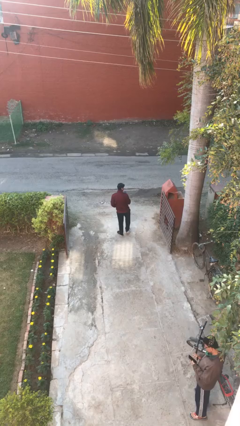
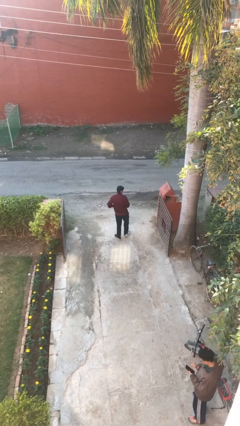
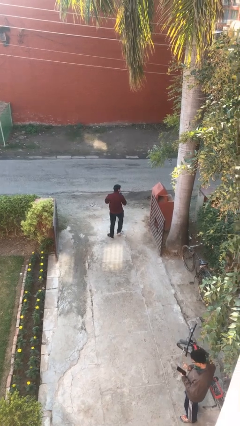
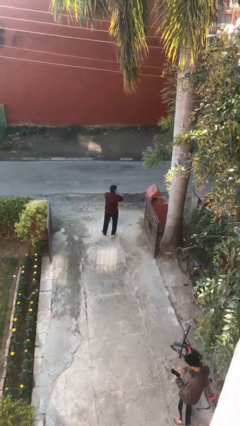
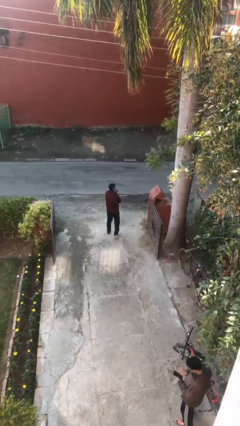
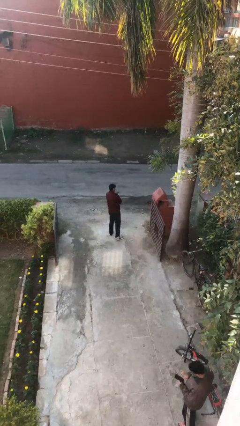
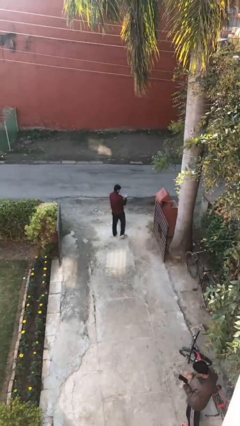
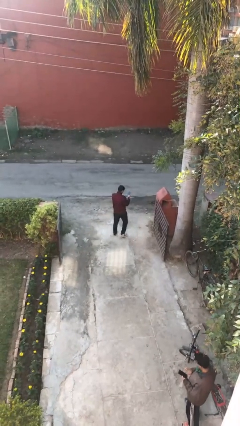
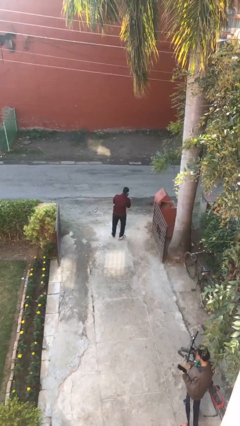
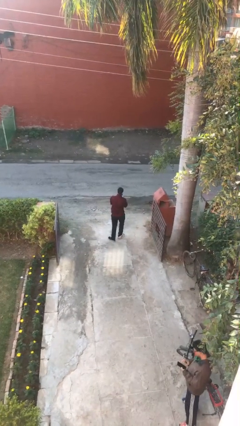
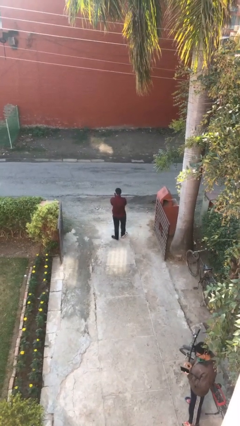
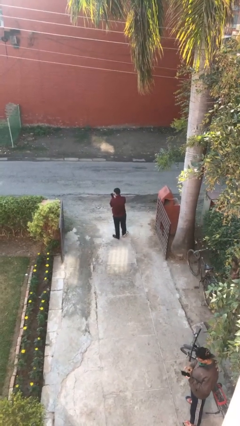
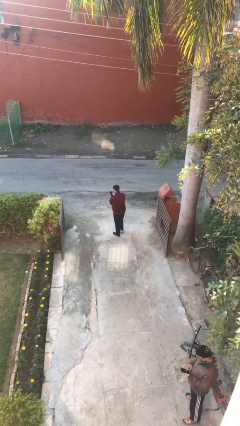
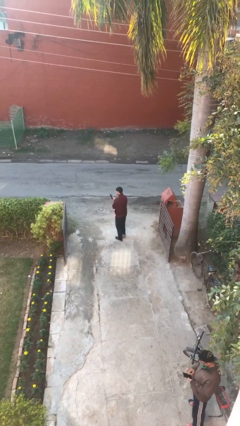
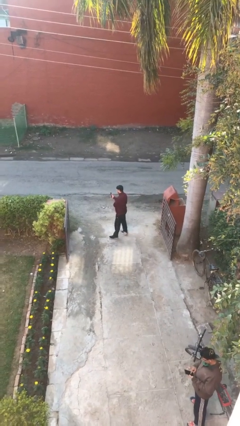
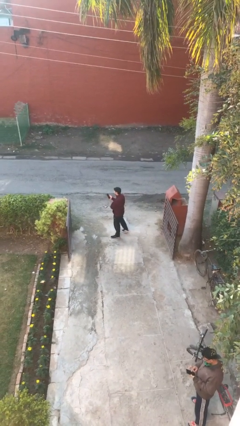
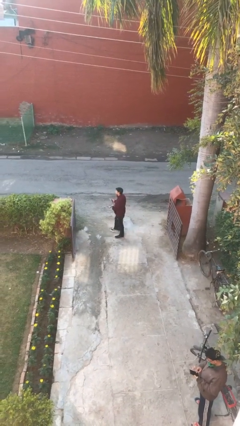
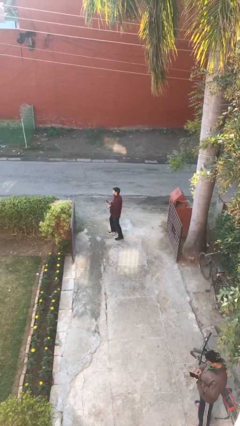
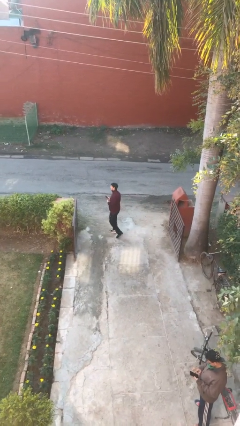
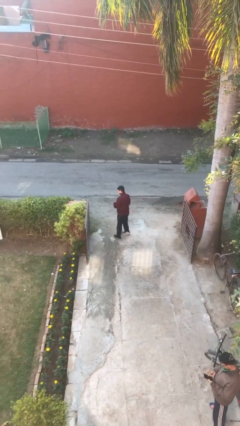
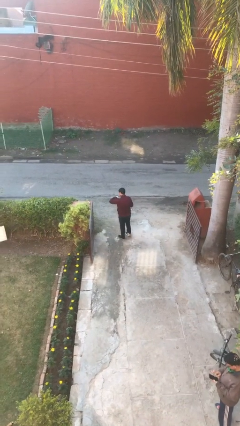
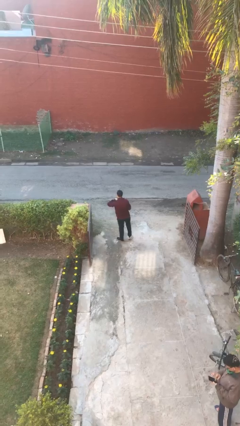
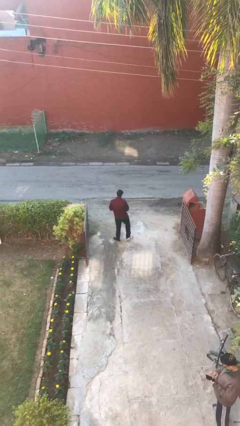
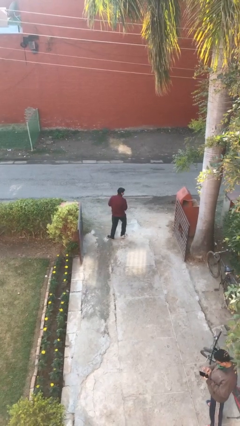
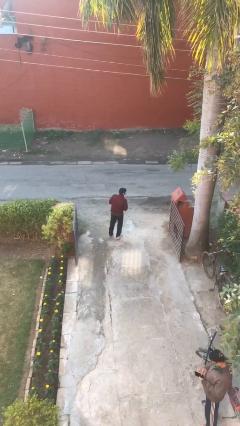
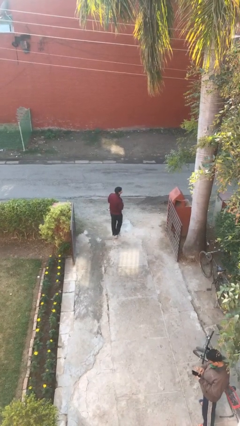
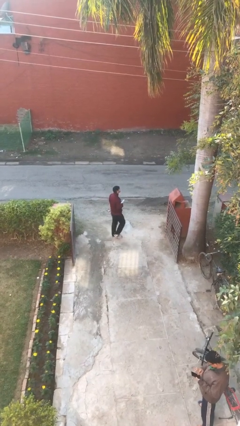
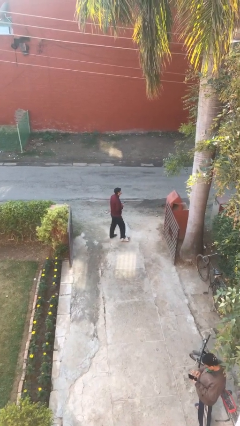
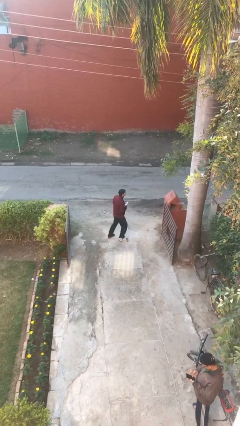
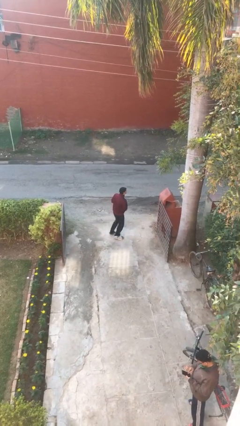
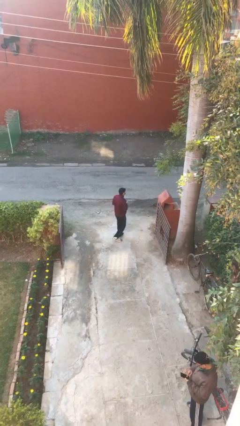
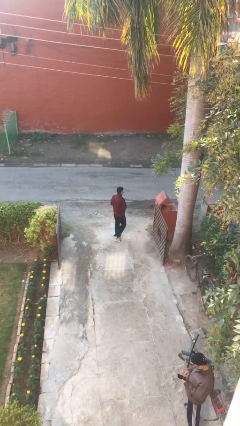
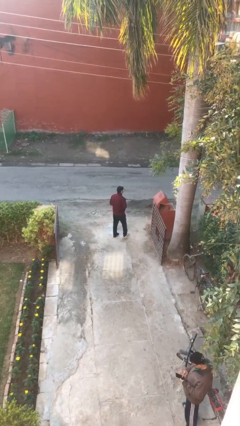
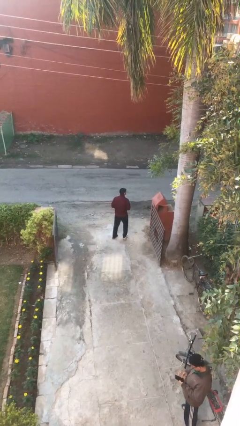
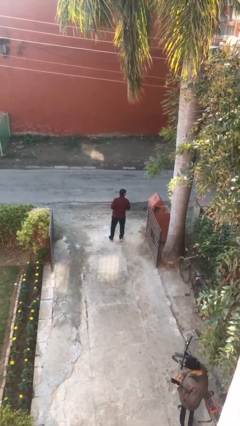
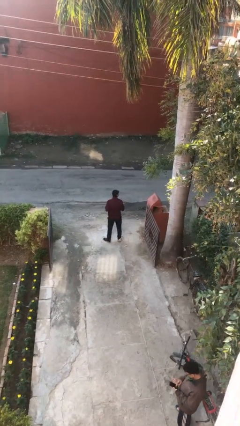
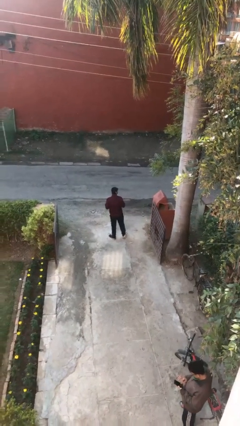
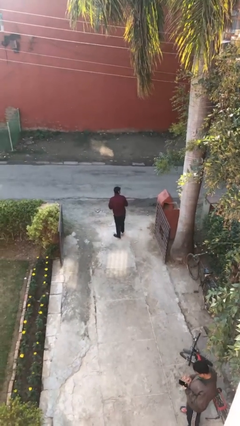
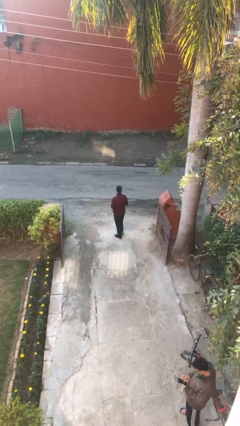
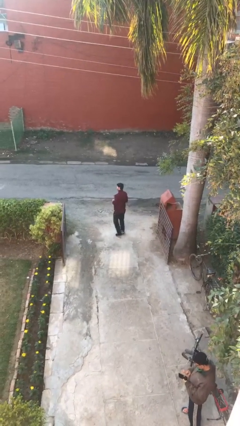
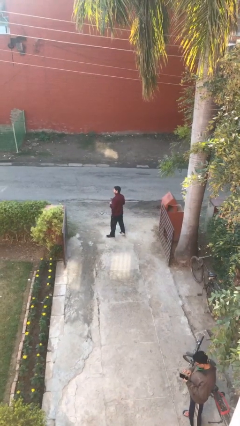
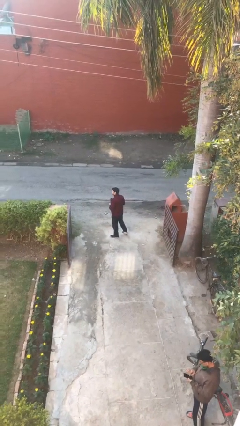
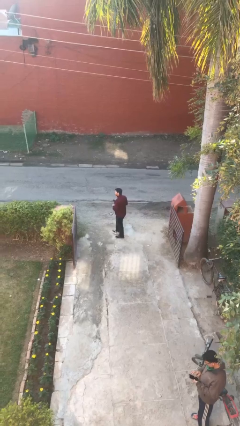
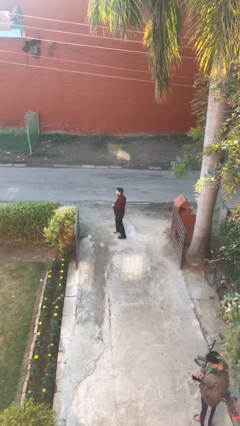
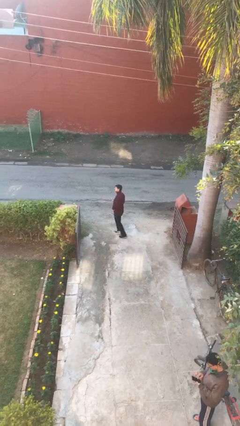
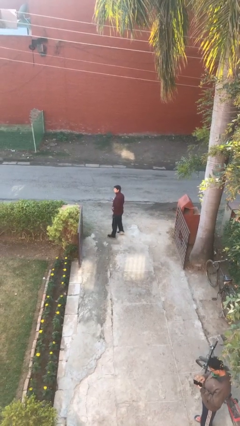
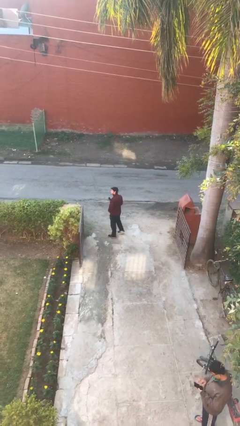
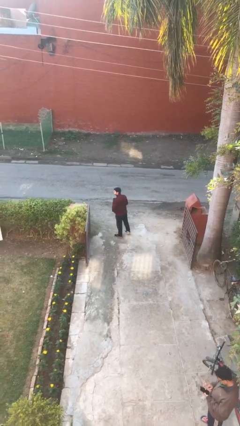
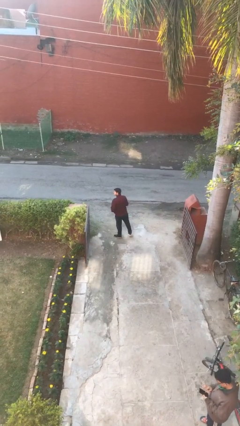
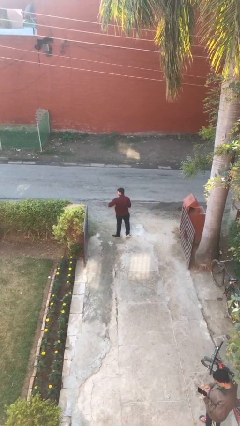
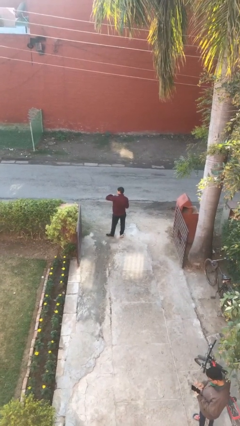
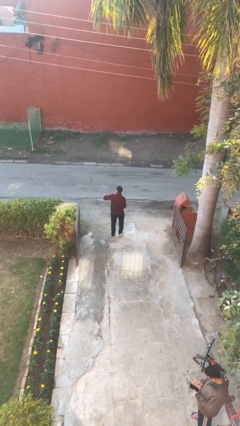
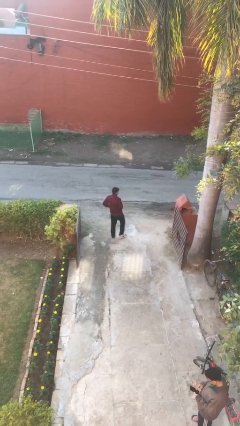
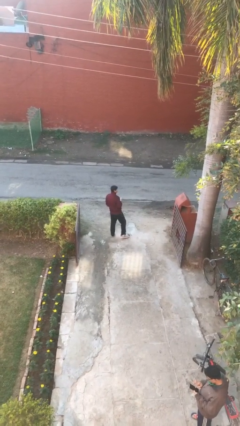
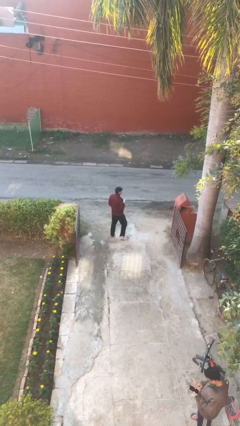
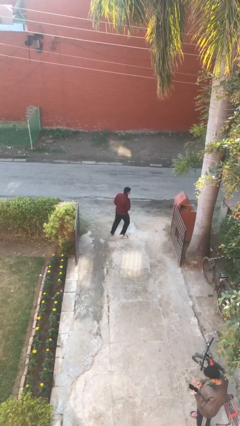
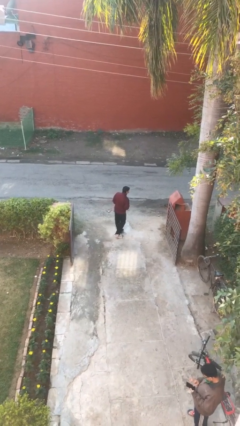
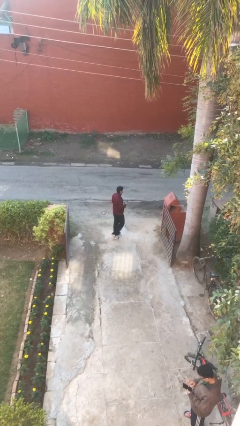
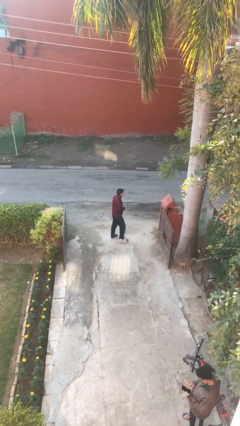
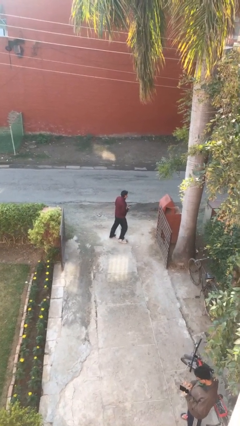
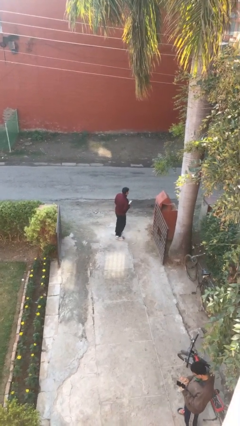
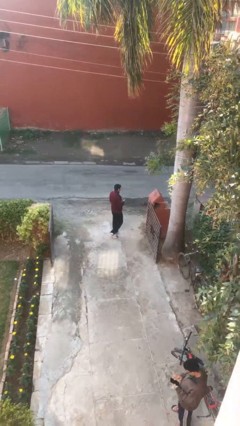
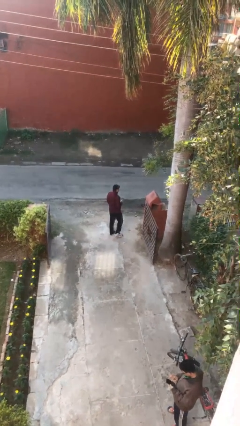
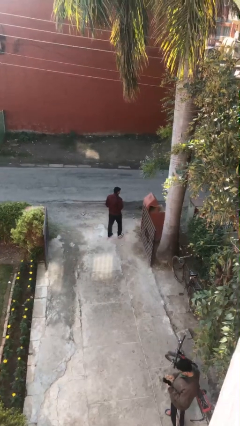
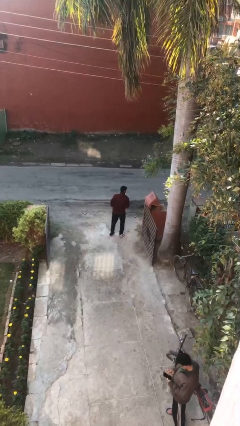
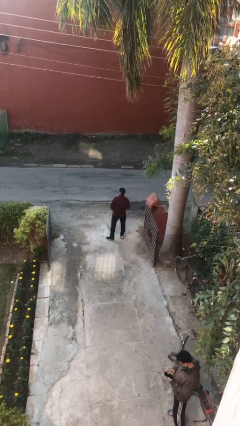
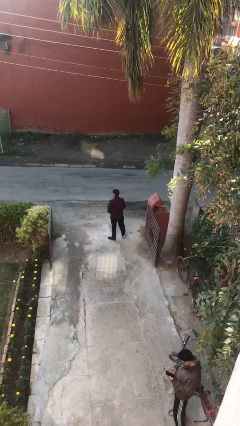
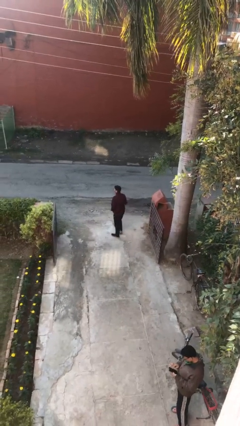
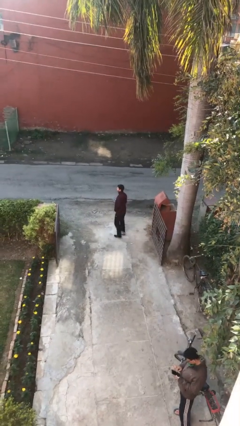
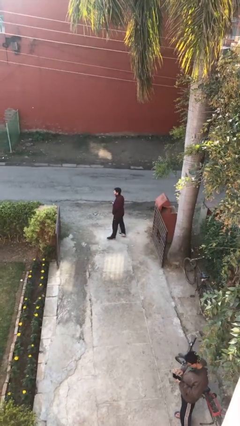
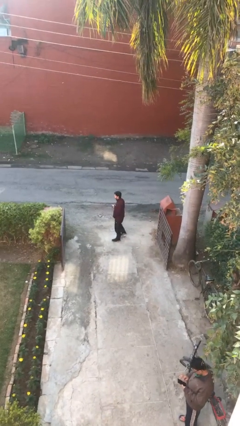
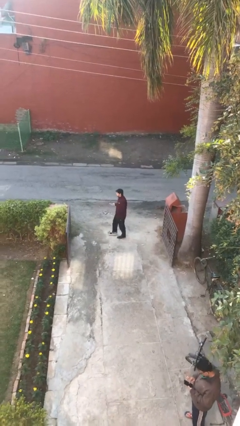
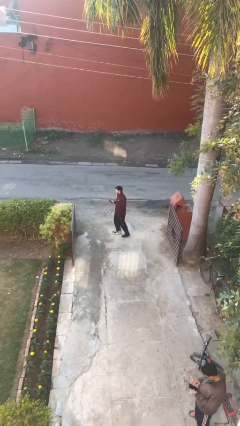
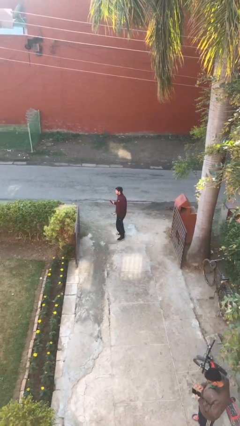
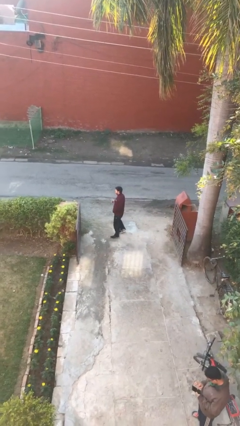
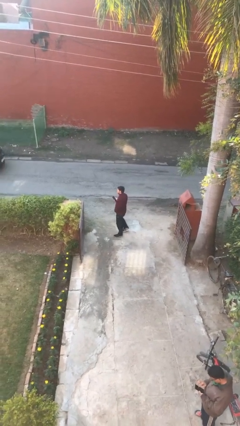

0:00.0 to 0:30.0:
person walks

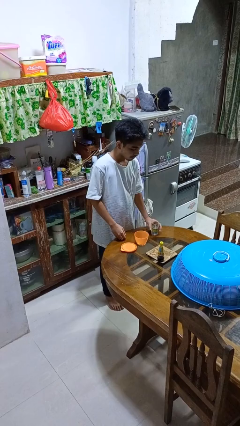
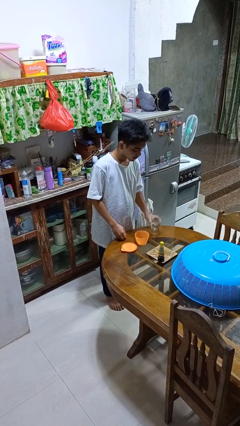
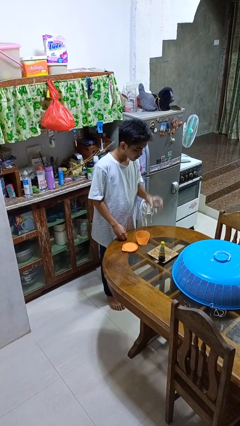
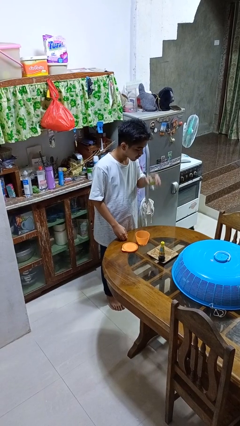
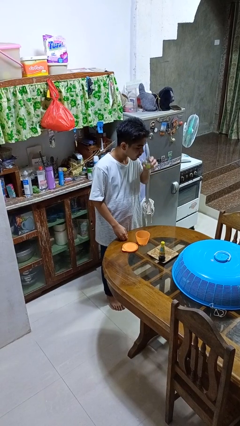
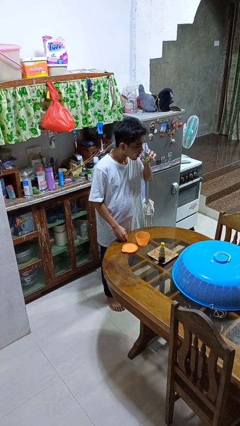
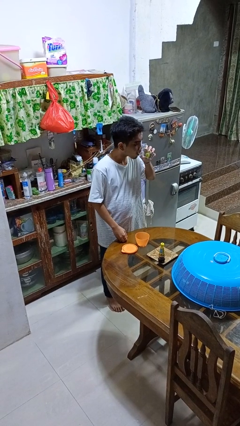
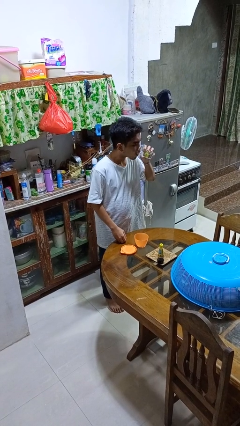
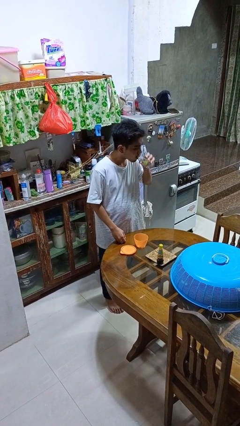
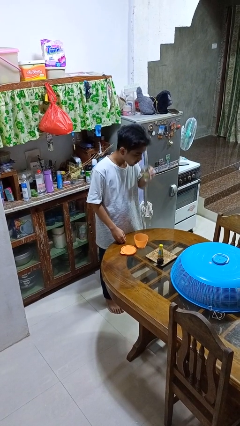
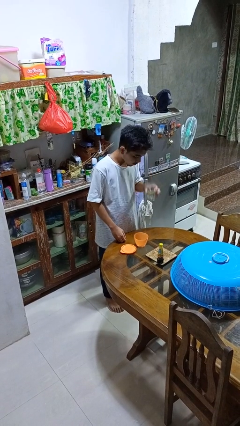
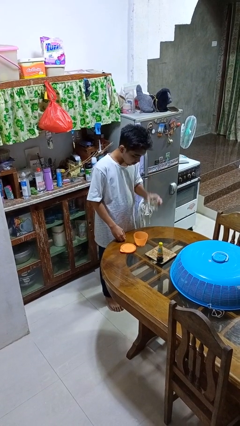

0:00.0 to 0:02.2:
person drinks from cup

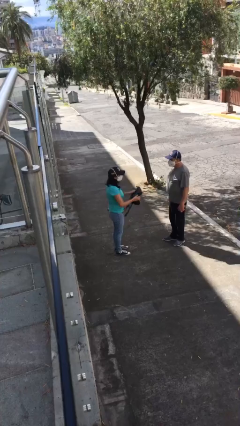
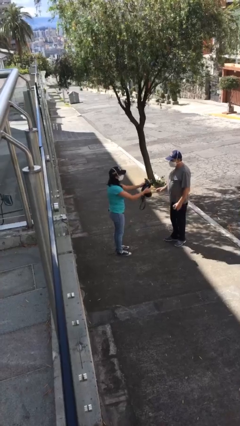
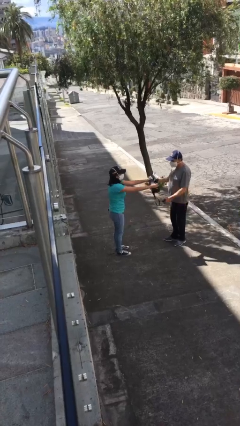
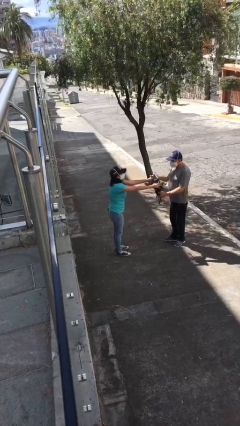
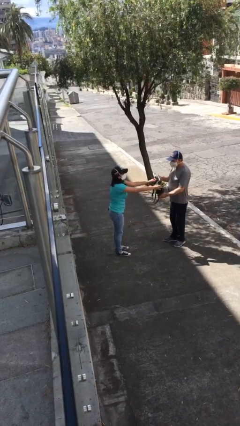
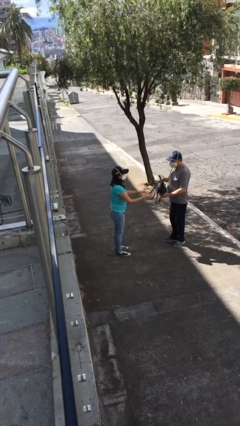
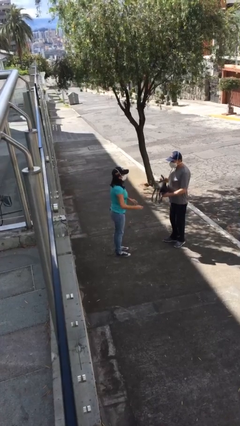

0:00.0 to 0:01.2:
person transfers object to person
